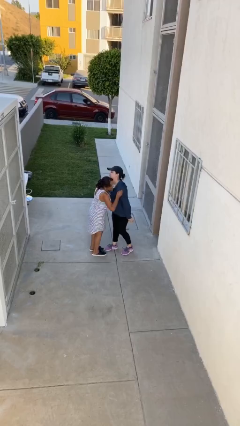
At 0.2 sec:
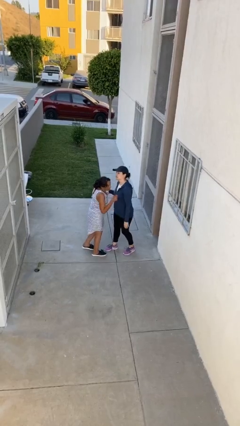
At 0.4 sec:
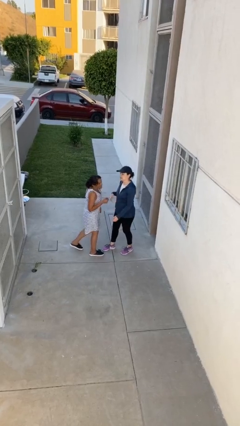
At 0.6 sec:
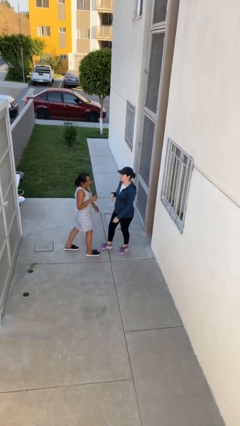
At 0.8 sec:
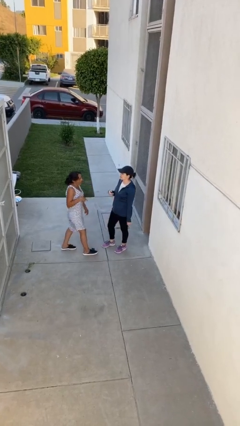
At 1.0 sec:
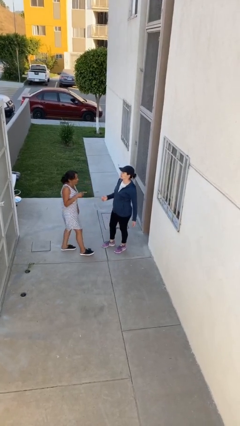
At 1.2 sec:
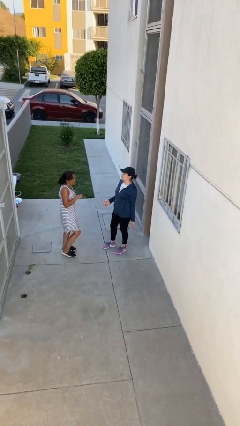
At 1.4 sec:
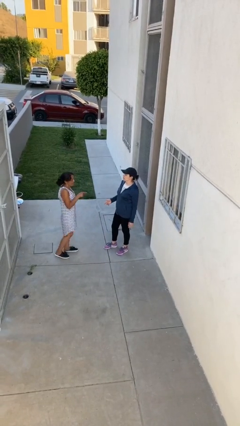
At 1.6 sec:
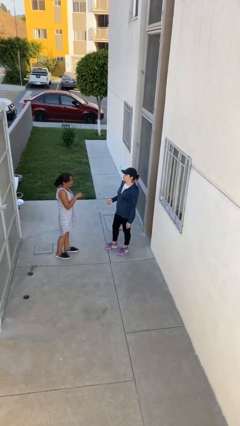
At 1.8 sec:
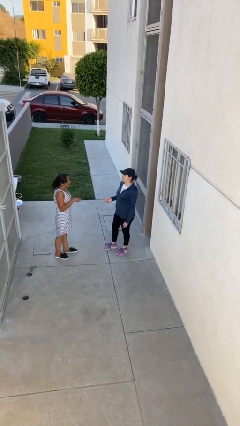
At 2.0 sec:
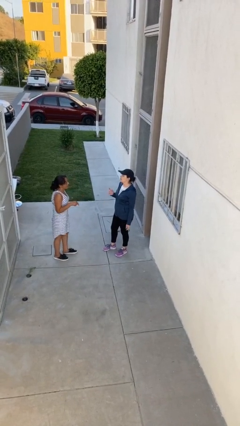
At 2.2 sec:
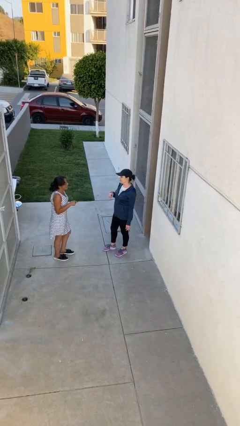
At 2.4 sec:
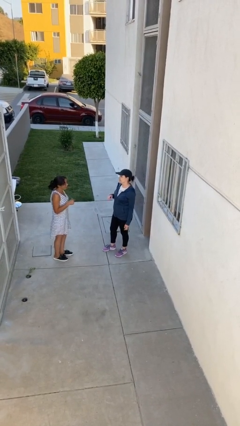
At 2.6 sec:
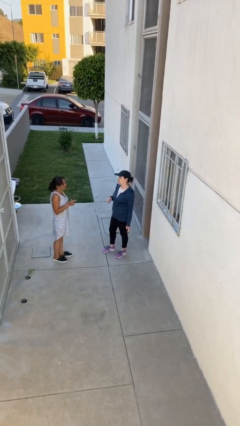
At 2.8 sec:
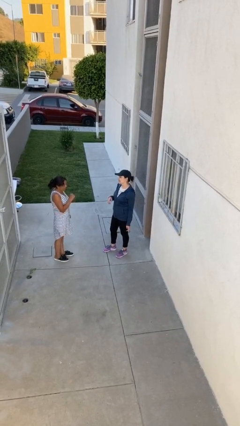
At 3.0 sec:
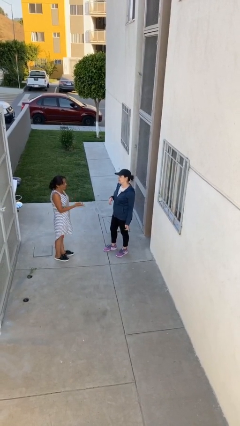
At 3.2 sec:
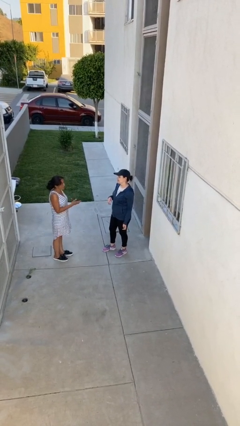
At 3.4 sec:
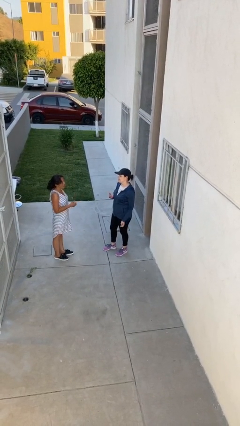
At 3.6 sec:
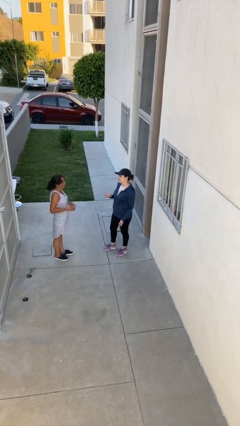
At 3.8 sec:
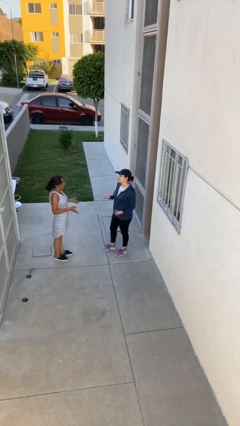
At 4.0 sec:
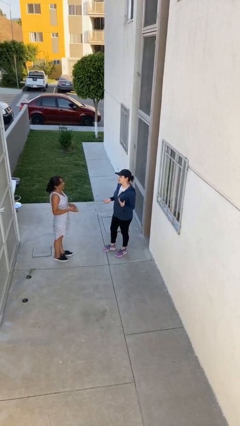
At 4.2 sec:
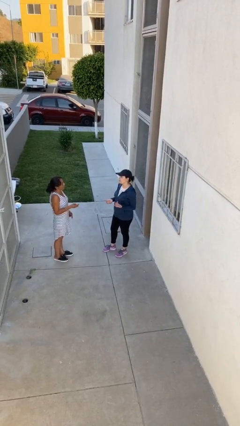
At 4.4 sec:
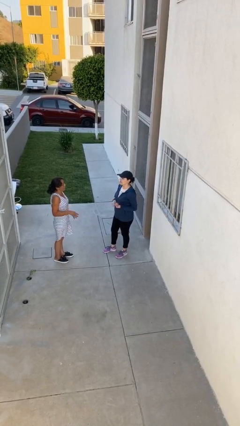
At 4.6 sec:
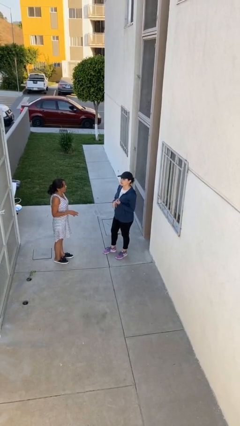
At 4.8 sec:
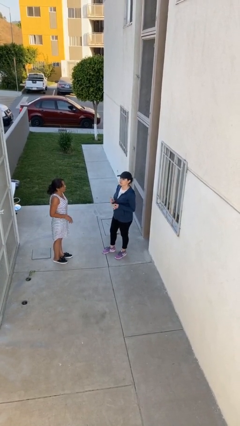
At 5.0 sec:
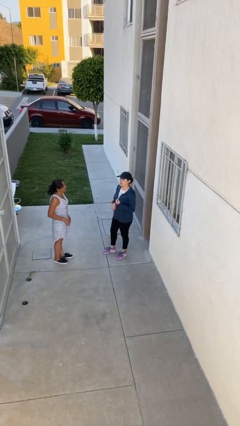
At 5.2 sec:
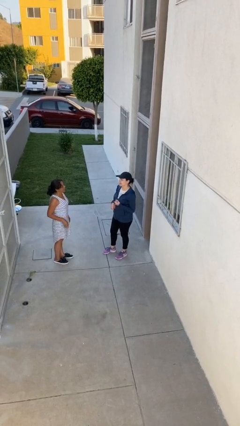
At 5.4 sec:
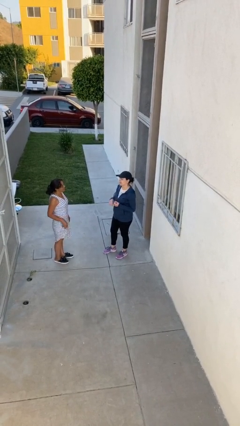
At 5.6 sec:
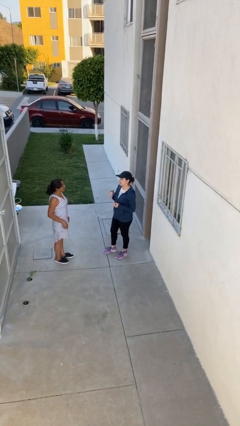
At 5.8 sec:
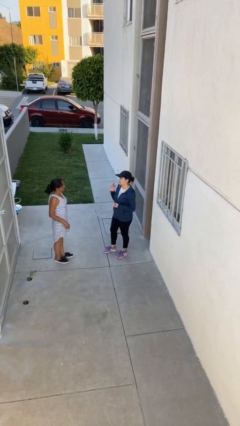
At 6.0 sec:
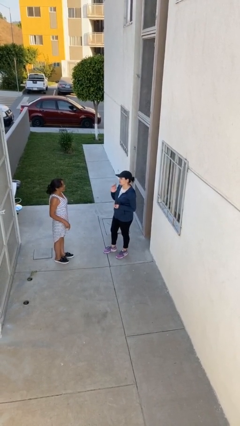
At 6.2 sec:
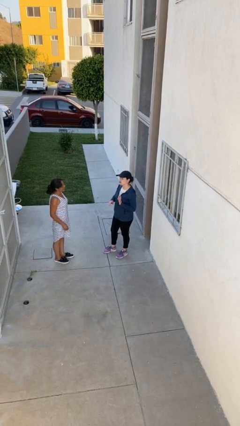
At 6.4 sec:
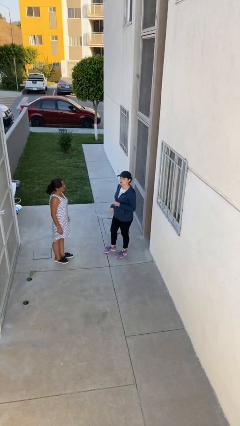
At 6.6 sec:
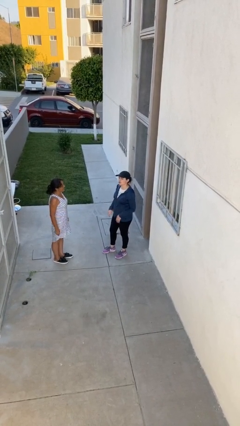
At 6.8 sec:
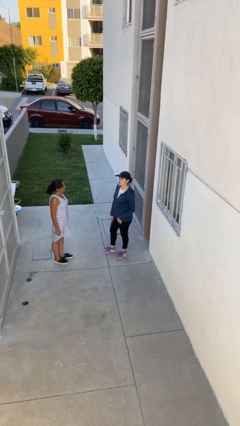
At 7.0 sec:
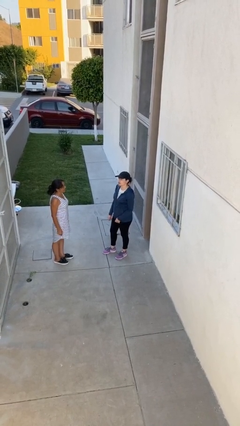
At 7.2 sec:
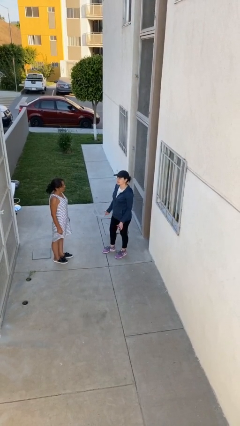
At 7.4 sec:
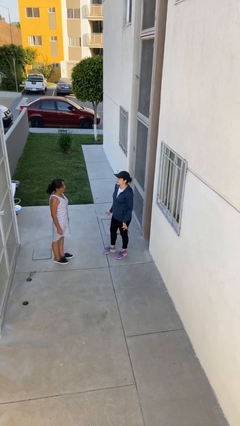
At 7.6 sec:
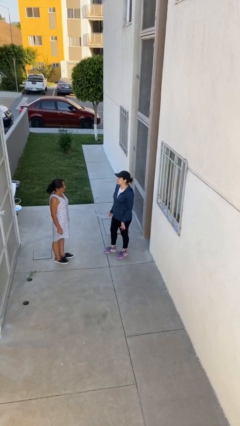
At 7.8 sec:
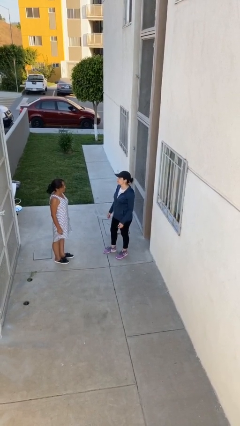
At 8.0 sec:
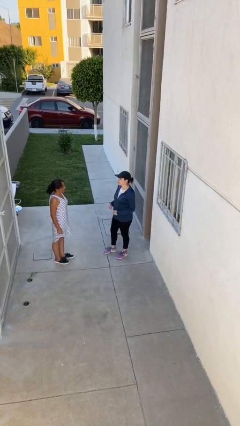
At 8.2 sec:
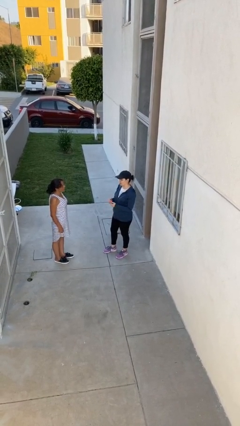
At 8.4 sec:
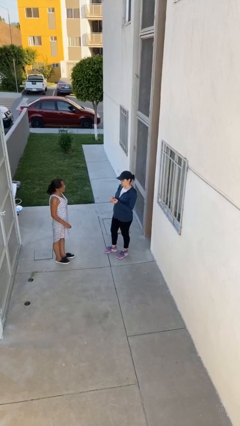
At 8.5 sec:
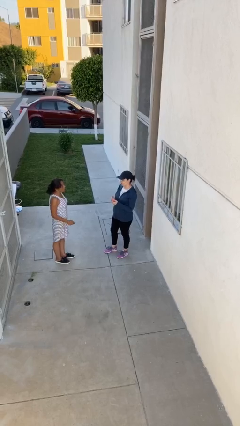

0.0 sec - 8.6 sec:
person talks to person

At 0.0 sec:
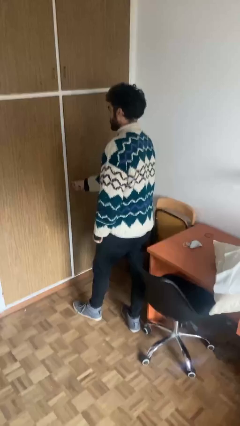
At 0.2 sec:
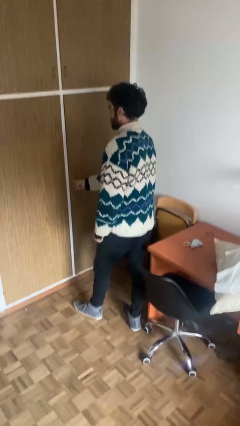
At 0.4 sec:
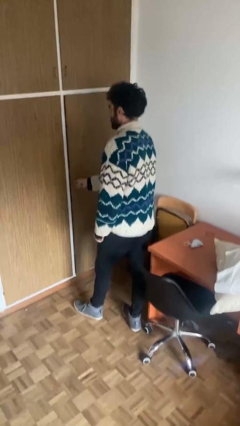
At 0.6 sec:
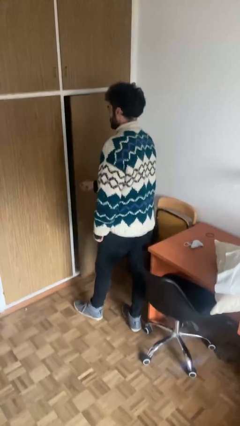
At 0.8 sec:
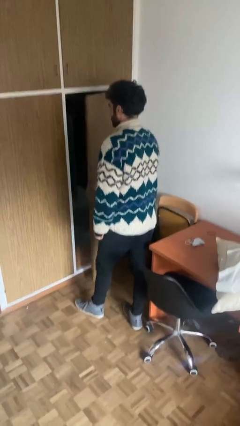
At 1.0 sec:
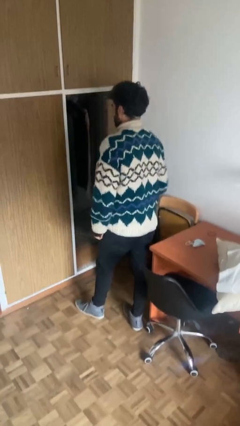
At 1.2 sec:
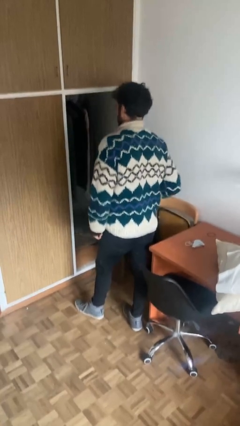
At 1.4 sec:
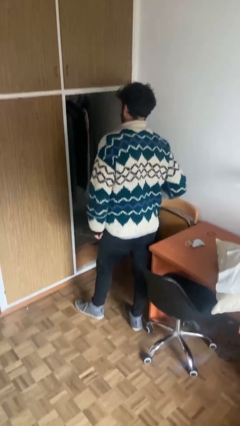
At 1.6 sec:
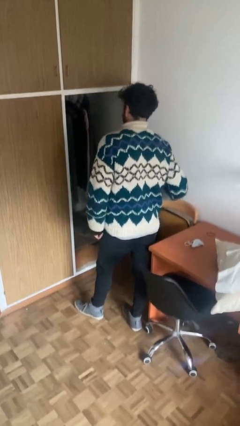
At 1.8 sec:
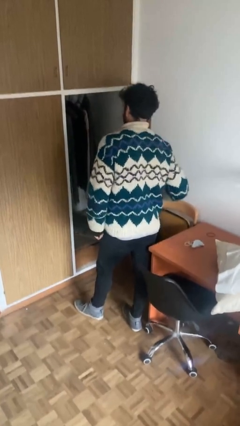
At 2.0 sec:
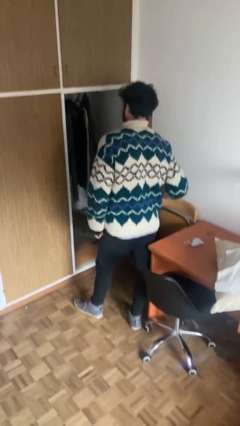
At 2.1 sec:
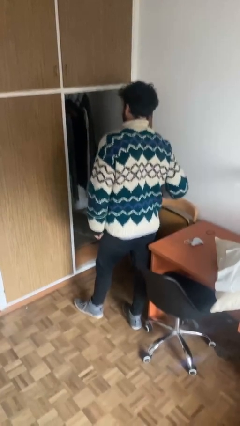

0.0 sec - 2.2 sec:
person opens closet door

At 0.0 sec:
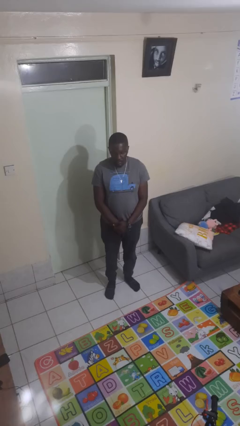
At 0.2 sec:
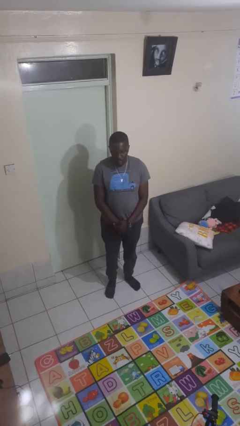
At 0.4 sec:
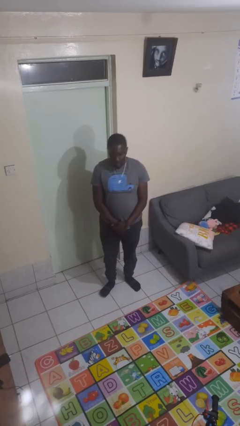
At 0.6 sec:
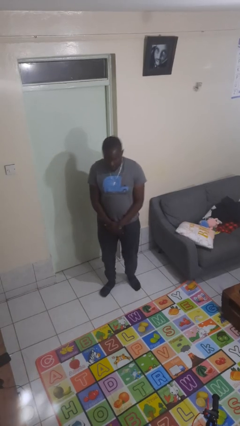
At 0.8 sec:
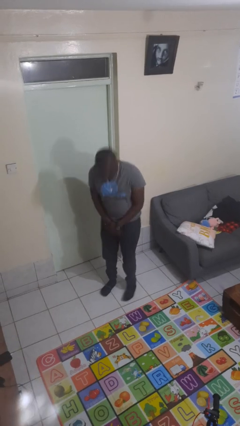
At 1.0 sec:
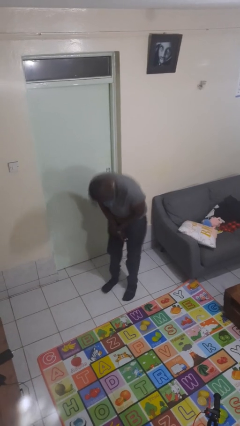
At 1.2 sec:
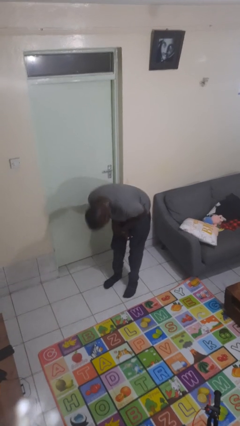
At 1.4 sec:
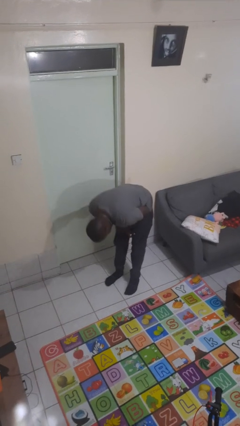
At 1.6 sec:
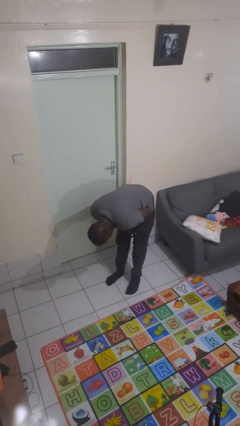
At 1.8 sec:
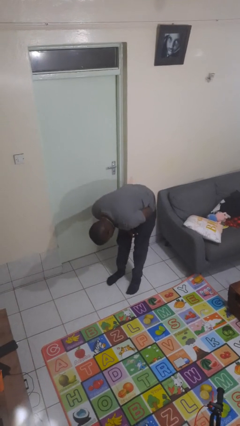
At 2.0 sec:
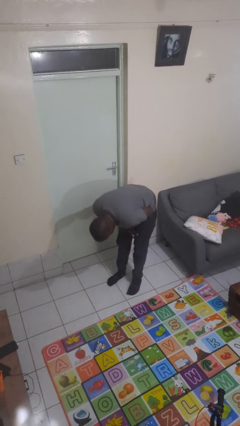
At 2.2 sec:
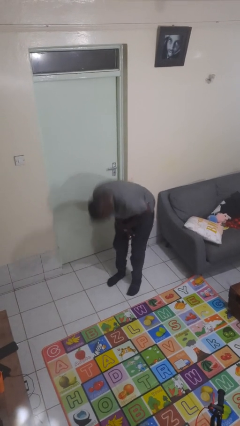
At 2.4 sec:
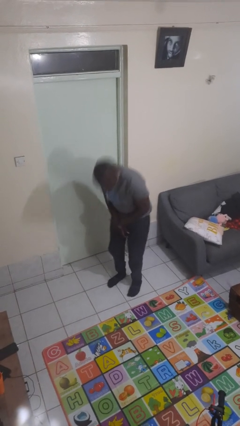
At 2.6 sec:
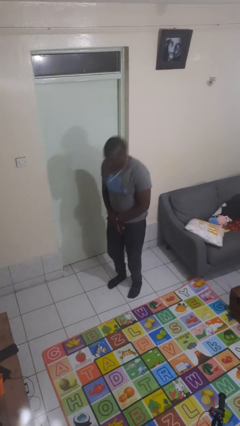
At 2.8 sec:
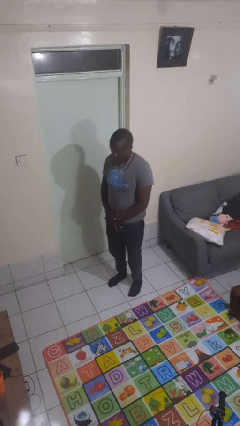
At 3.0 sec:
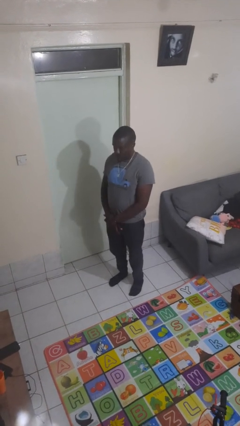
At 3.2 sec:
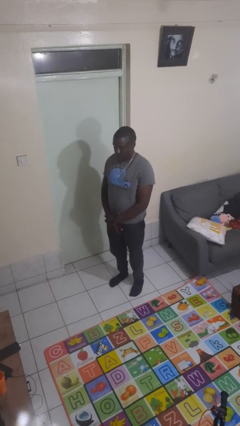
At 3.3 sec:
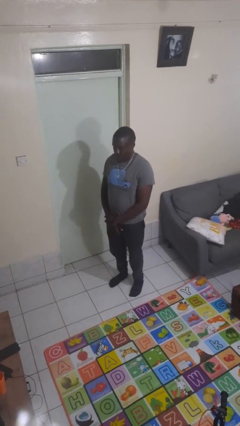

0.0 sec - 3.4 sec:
person bows

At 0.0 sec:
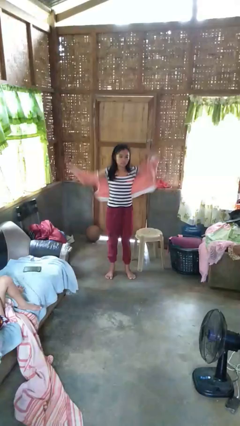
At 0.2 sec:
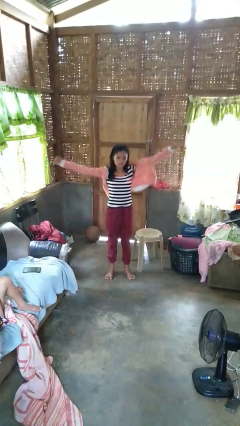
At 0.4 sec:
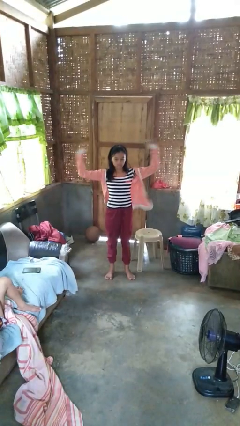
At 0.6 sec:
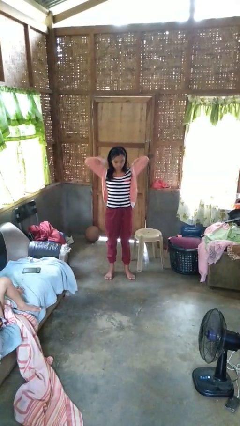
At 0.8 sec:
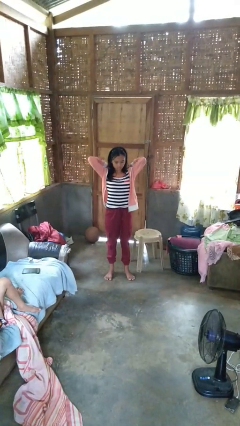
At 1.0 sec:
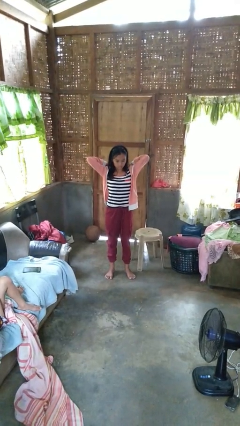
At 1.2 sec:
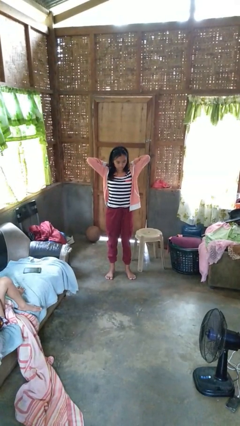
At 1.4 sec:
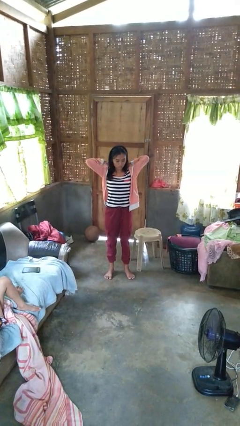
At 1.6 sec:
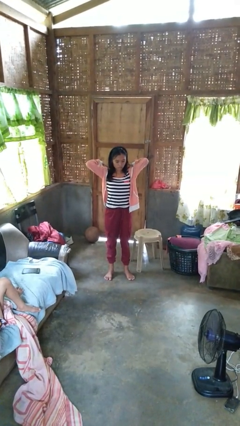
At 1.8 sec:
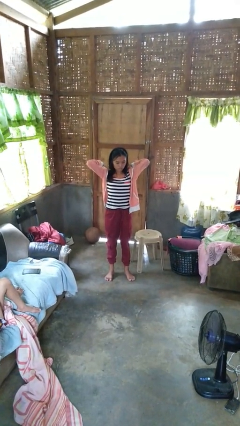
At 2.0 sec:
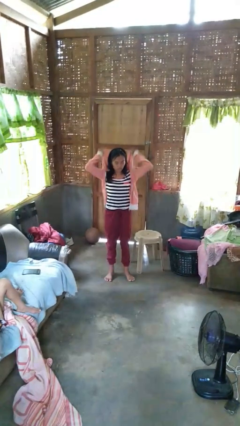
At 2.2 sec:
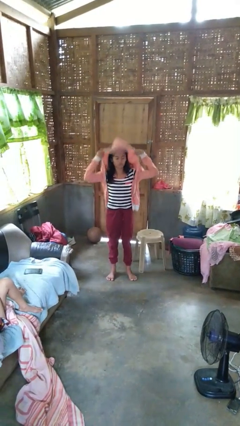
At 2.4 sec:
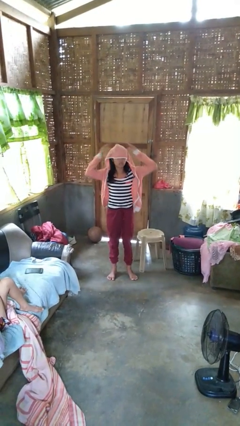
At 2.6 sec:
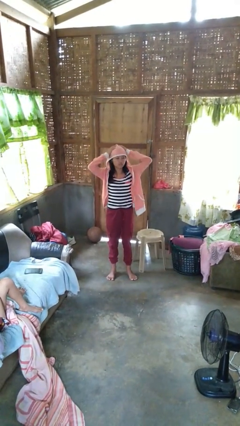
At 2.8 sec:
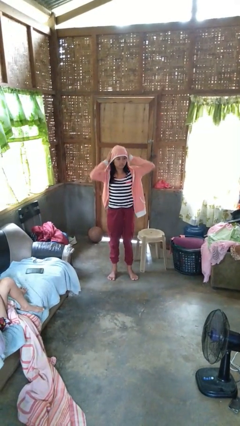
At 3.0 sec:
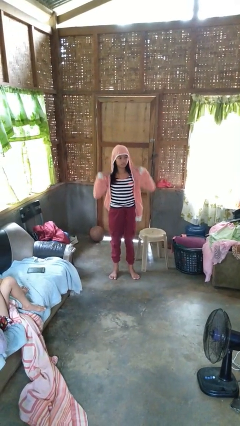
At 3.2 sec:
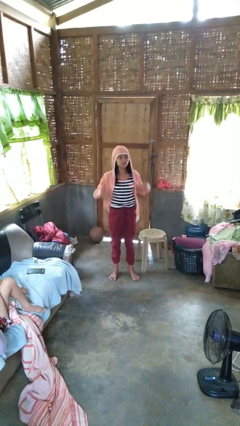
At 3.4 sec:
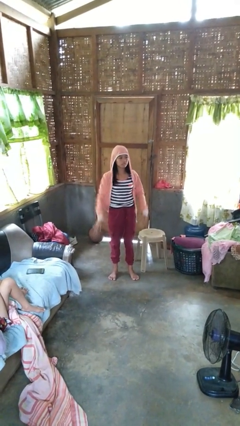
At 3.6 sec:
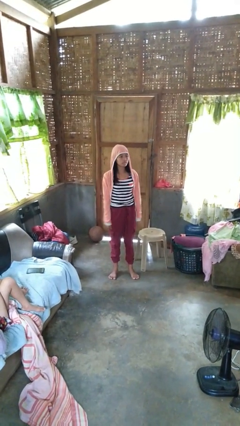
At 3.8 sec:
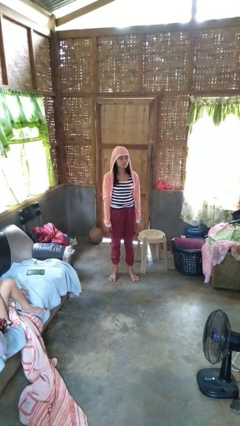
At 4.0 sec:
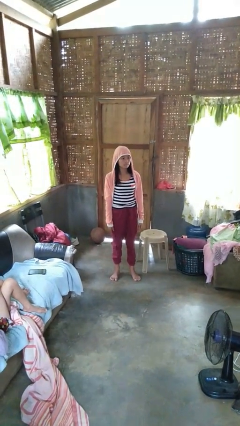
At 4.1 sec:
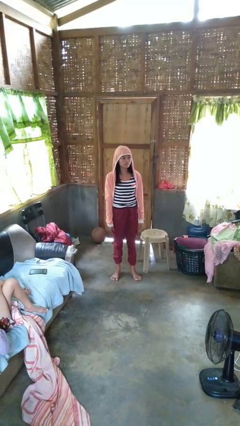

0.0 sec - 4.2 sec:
person puts on hoodie
